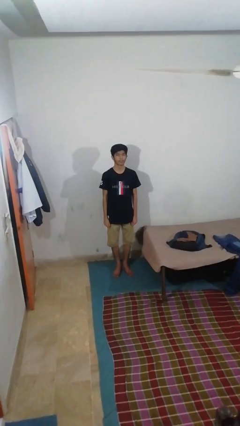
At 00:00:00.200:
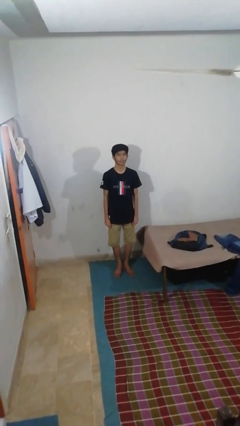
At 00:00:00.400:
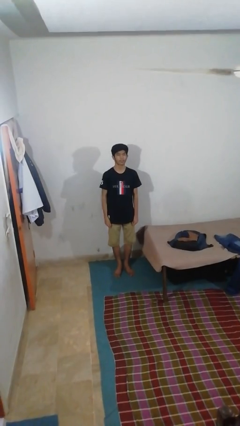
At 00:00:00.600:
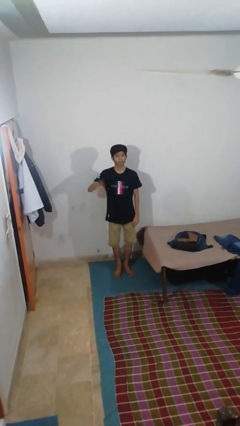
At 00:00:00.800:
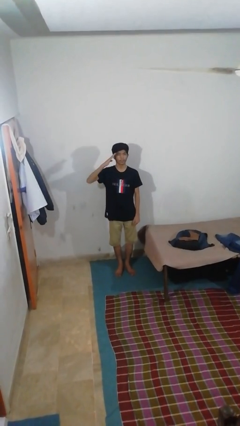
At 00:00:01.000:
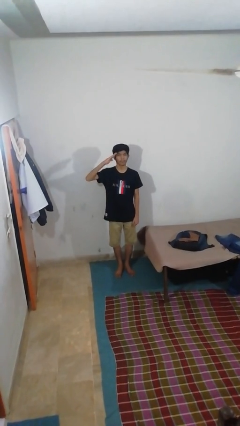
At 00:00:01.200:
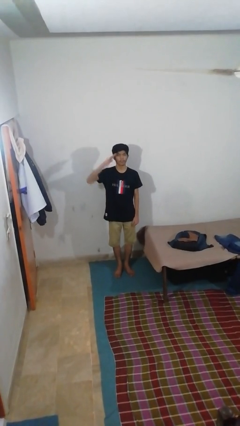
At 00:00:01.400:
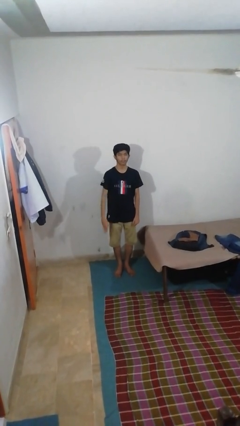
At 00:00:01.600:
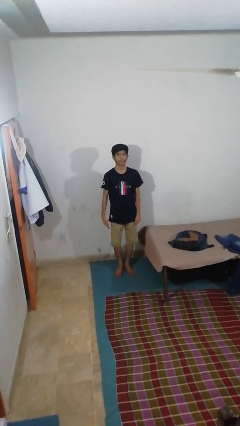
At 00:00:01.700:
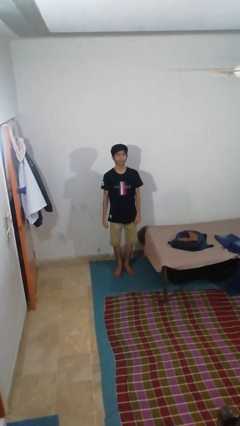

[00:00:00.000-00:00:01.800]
person salutes

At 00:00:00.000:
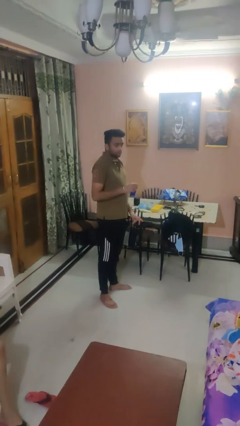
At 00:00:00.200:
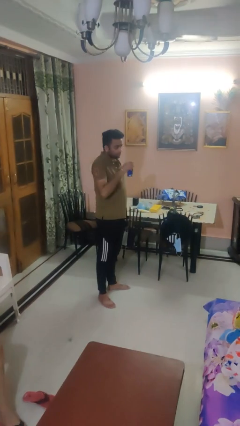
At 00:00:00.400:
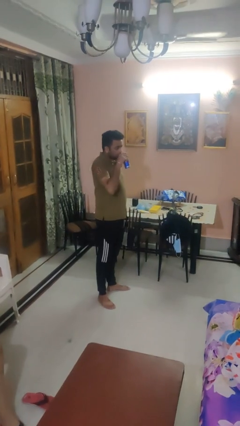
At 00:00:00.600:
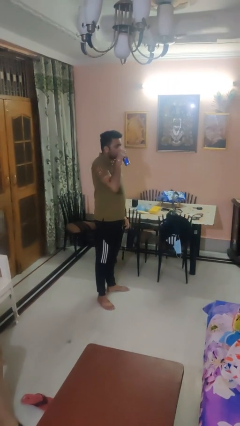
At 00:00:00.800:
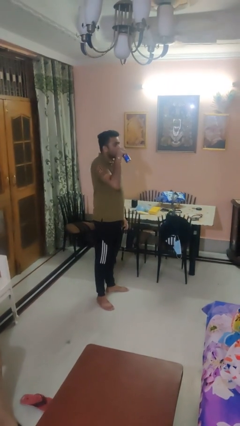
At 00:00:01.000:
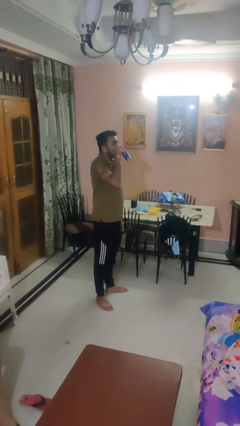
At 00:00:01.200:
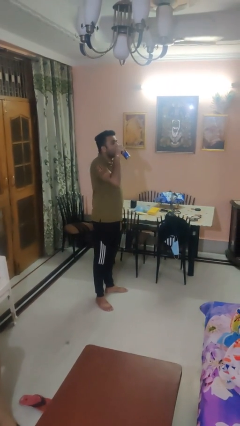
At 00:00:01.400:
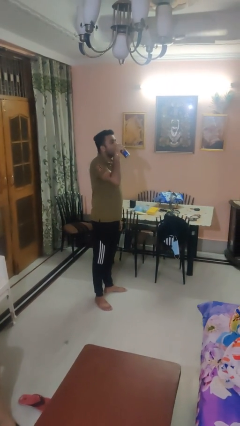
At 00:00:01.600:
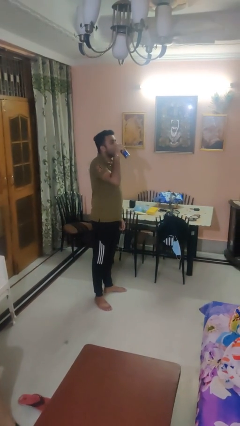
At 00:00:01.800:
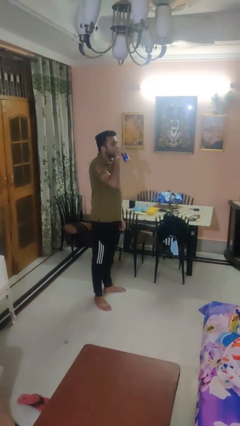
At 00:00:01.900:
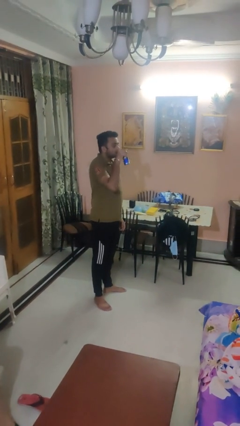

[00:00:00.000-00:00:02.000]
person drinks from beverage can

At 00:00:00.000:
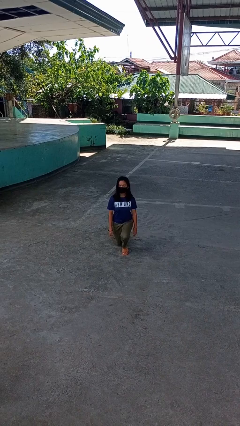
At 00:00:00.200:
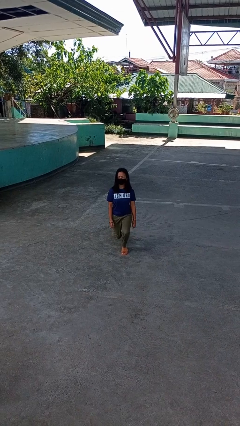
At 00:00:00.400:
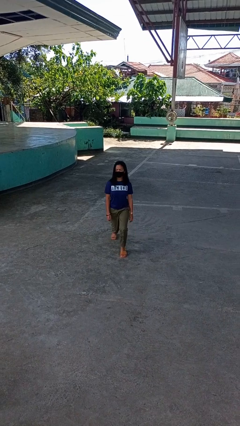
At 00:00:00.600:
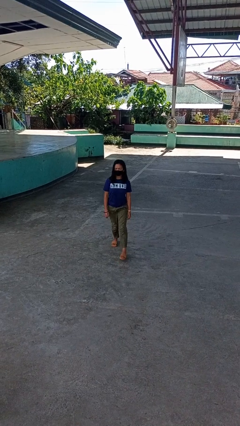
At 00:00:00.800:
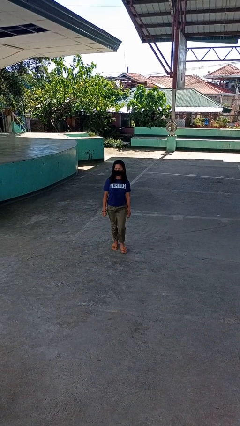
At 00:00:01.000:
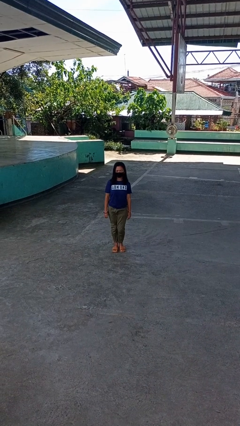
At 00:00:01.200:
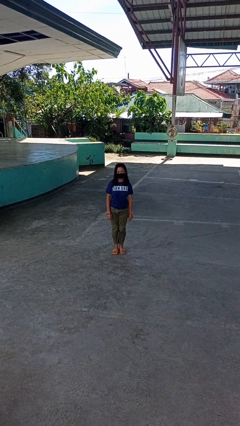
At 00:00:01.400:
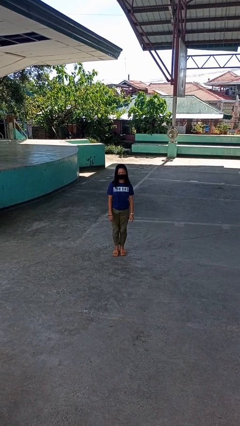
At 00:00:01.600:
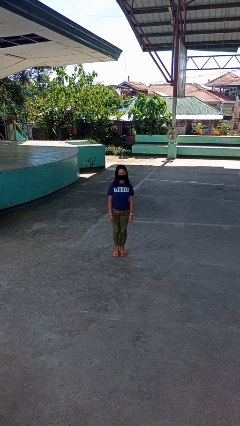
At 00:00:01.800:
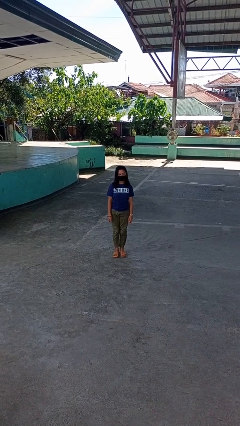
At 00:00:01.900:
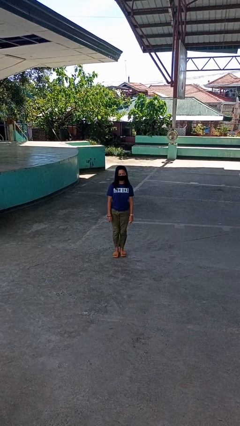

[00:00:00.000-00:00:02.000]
person stands up from floor

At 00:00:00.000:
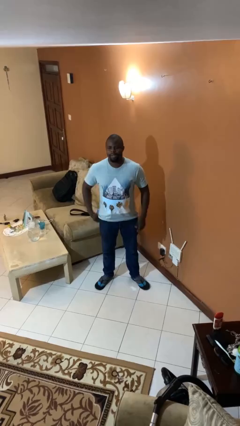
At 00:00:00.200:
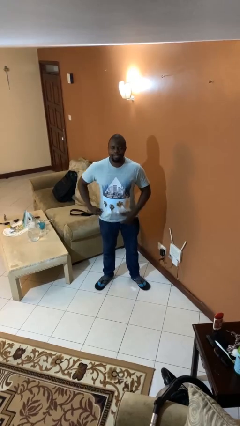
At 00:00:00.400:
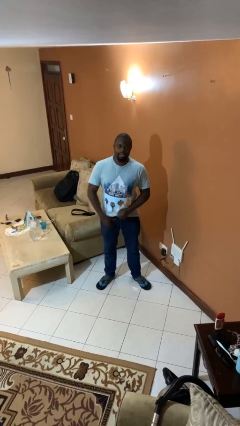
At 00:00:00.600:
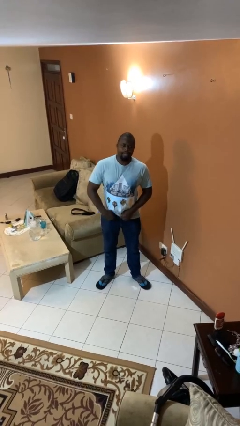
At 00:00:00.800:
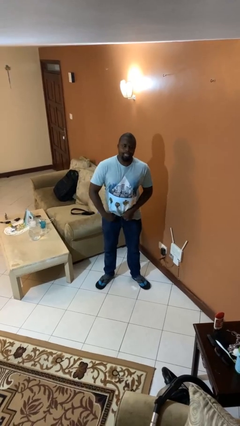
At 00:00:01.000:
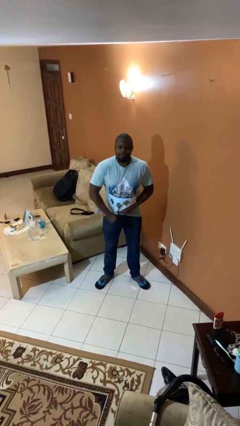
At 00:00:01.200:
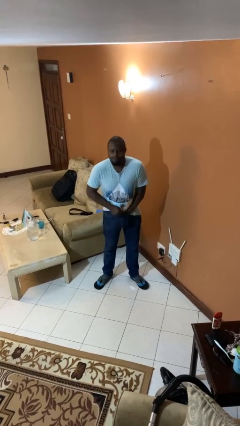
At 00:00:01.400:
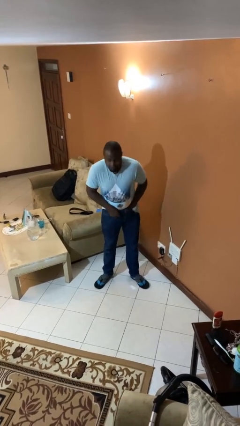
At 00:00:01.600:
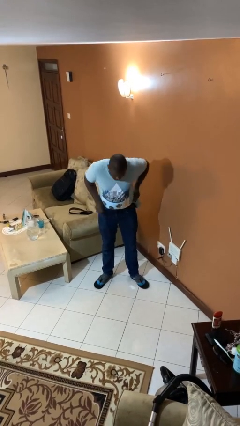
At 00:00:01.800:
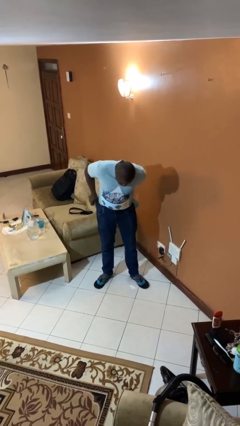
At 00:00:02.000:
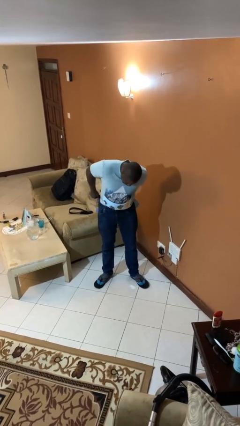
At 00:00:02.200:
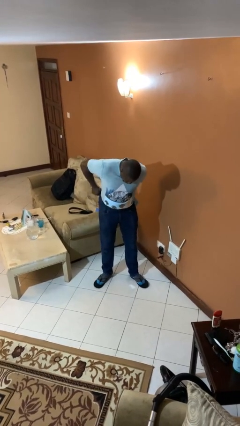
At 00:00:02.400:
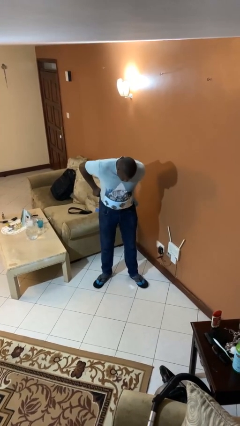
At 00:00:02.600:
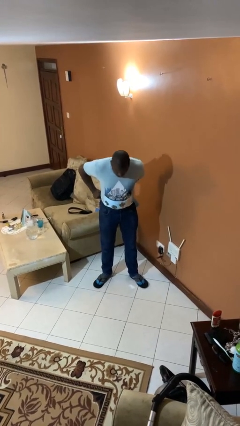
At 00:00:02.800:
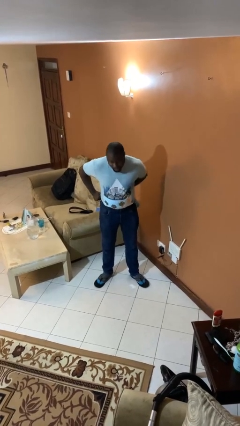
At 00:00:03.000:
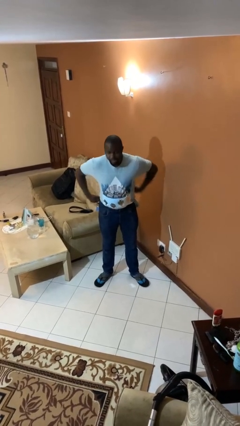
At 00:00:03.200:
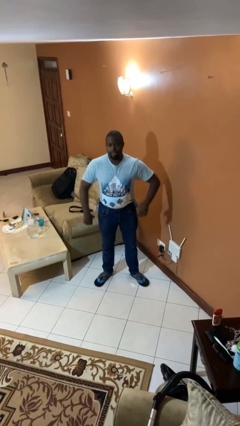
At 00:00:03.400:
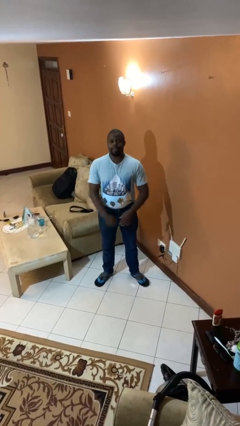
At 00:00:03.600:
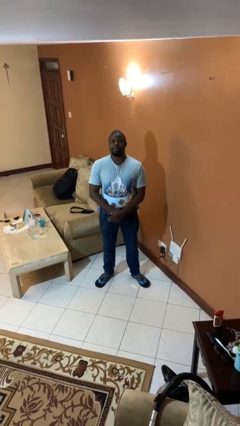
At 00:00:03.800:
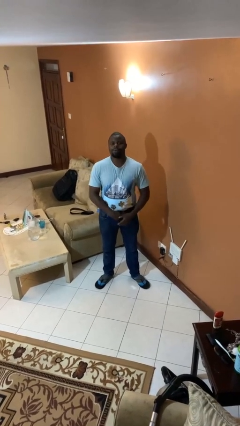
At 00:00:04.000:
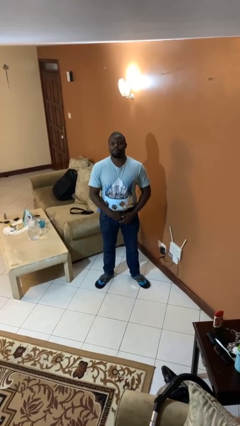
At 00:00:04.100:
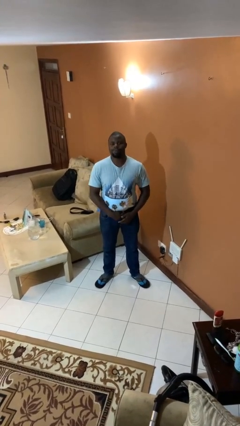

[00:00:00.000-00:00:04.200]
person tucks in shirt

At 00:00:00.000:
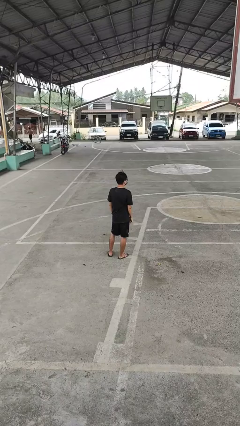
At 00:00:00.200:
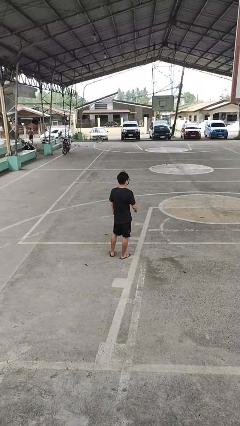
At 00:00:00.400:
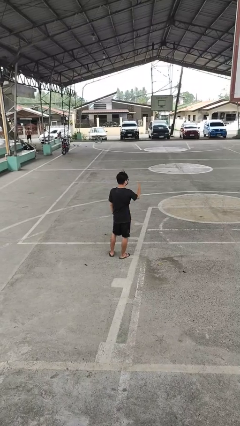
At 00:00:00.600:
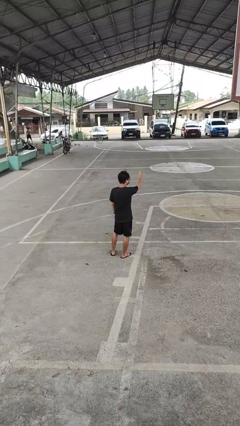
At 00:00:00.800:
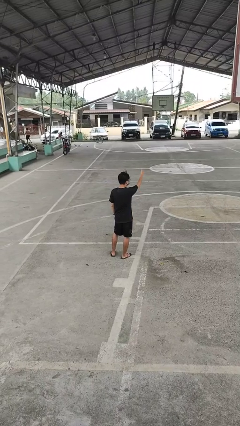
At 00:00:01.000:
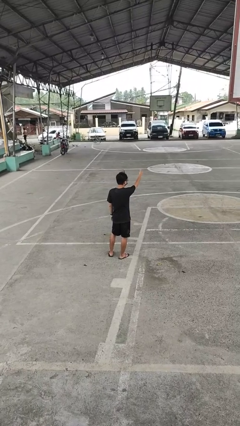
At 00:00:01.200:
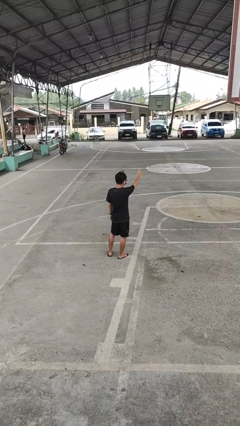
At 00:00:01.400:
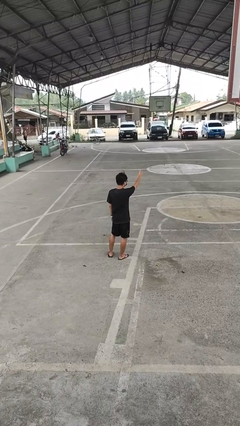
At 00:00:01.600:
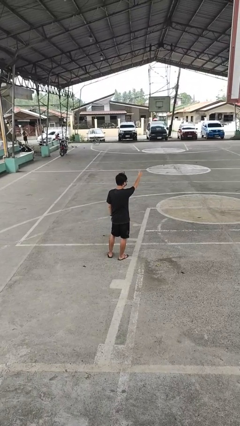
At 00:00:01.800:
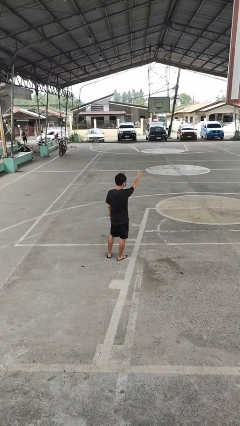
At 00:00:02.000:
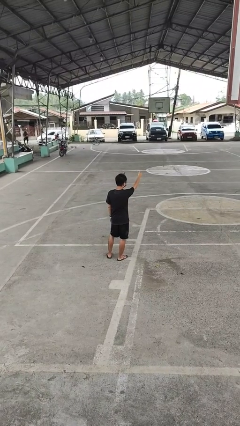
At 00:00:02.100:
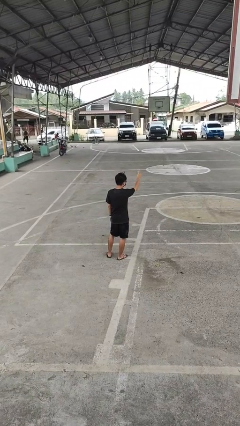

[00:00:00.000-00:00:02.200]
person gestures thumbs up

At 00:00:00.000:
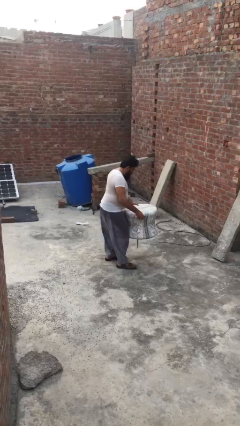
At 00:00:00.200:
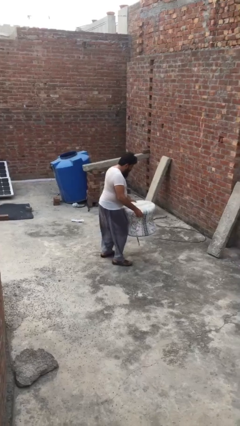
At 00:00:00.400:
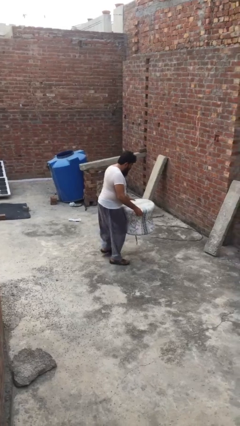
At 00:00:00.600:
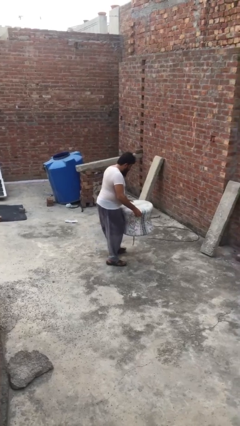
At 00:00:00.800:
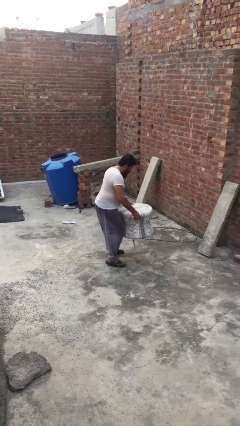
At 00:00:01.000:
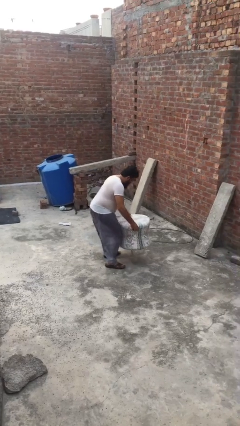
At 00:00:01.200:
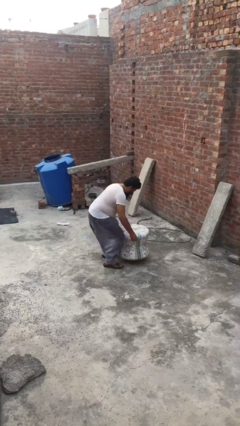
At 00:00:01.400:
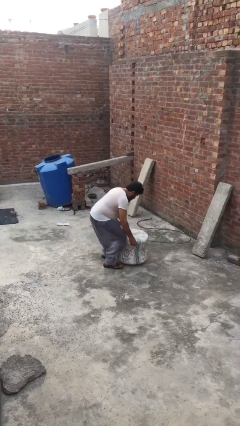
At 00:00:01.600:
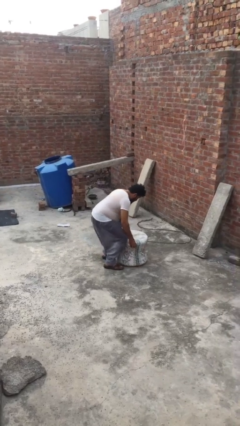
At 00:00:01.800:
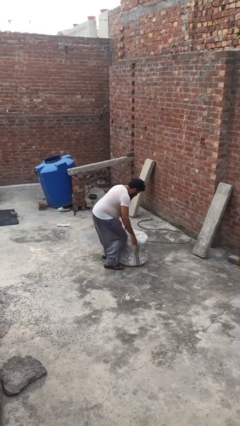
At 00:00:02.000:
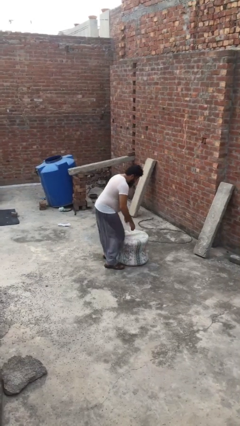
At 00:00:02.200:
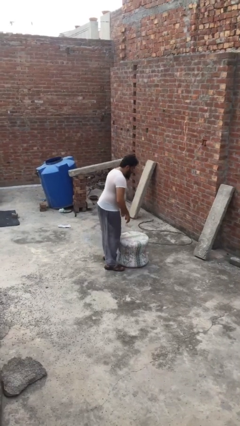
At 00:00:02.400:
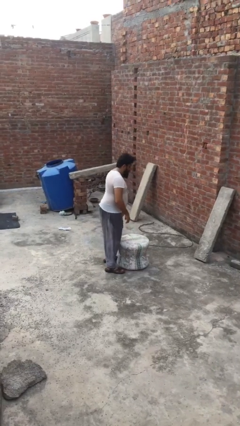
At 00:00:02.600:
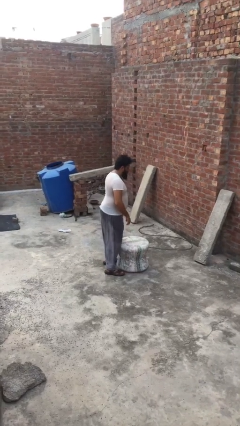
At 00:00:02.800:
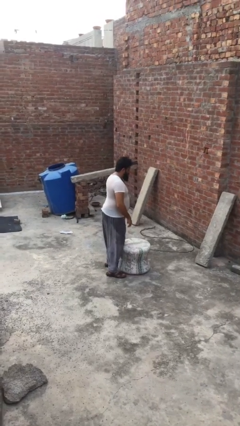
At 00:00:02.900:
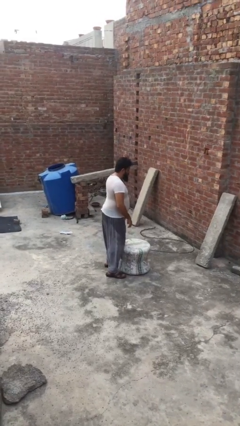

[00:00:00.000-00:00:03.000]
person puts down object on floor

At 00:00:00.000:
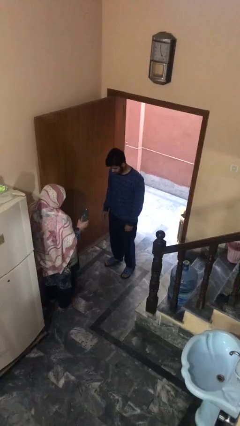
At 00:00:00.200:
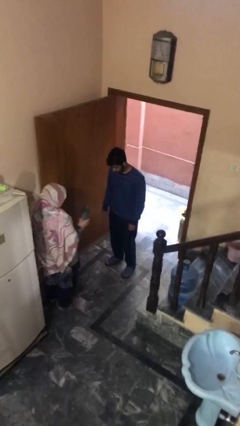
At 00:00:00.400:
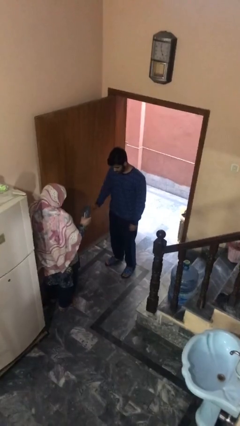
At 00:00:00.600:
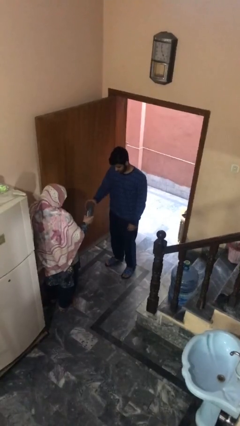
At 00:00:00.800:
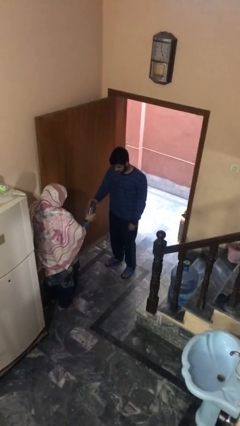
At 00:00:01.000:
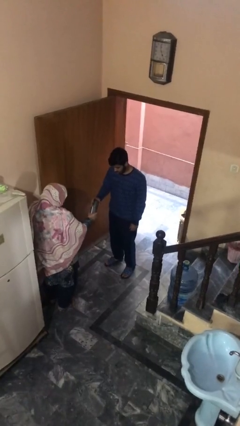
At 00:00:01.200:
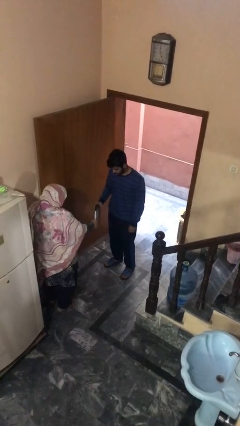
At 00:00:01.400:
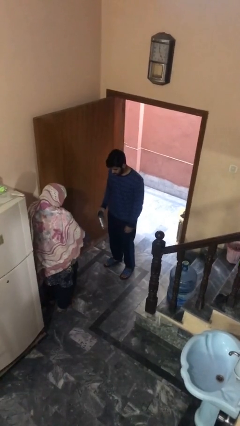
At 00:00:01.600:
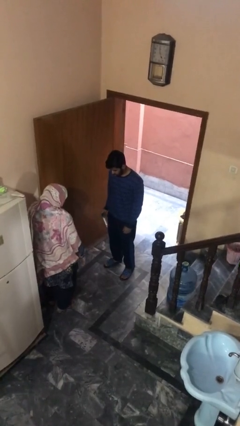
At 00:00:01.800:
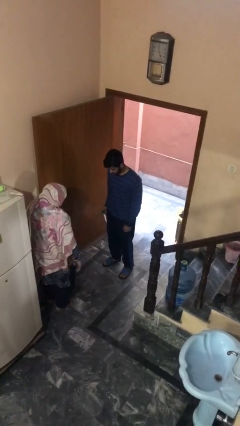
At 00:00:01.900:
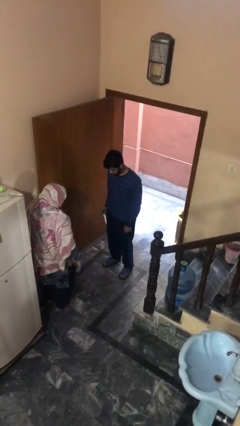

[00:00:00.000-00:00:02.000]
person transfers object to person
